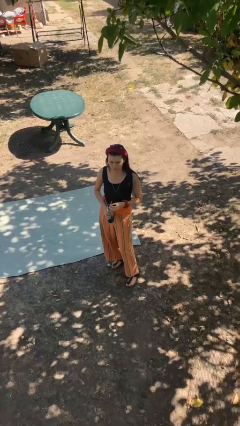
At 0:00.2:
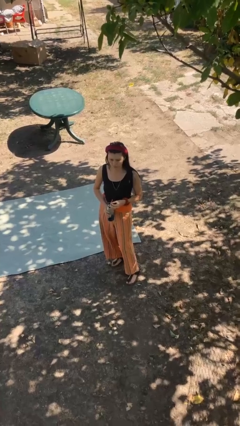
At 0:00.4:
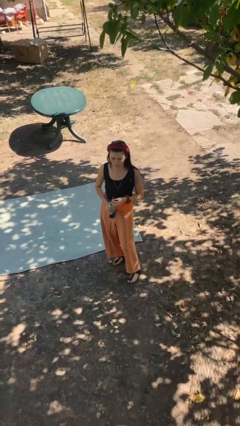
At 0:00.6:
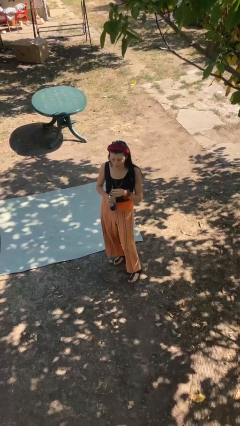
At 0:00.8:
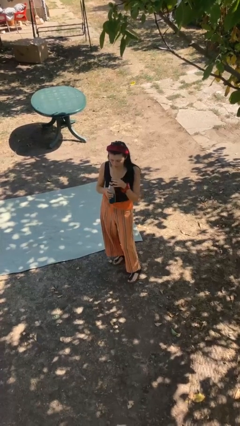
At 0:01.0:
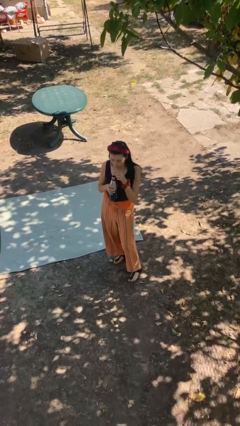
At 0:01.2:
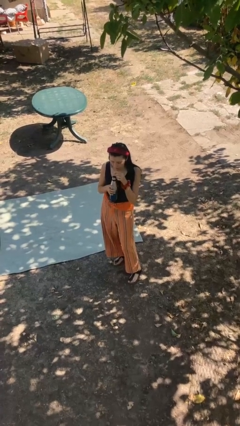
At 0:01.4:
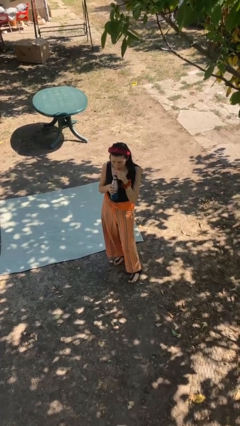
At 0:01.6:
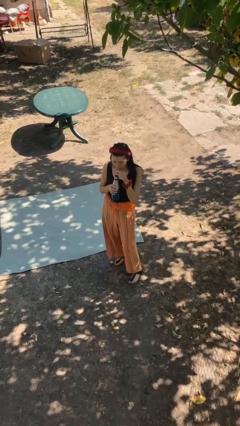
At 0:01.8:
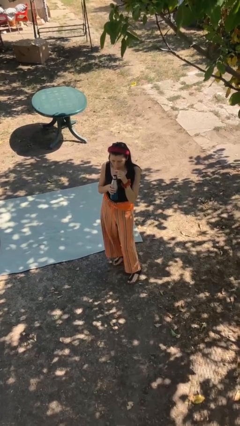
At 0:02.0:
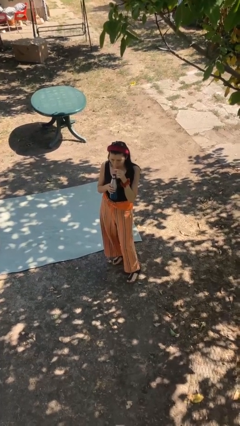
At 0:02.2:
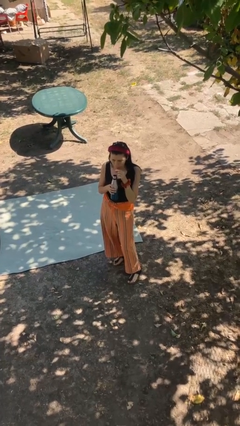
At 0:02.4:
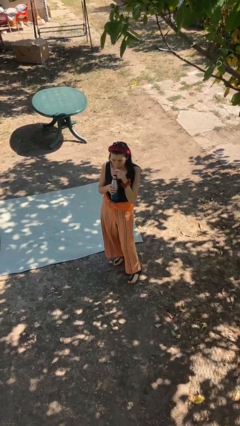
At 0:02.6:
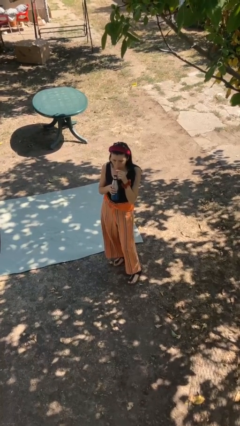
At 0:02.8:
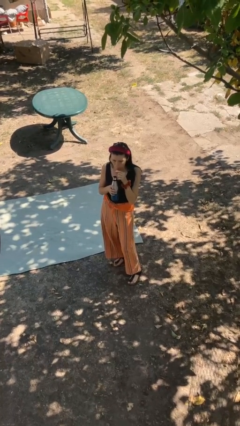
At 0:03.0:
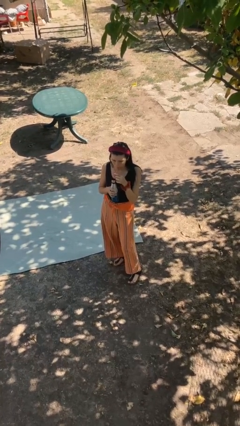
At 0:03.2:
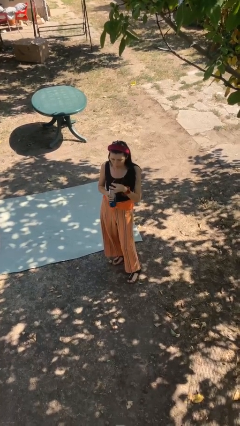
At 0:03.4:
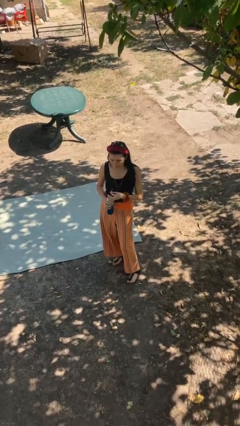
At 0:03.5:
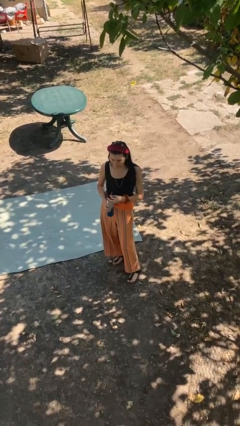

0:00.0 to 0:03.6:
person drinks from bottle

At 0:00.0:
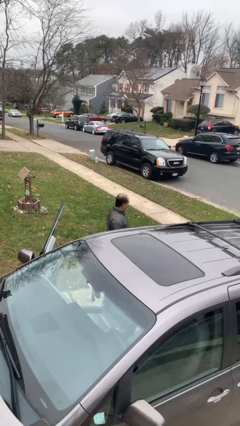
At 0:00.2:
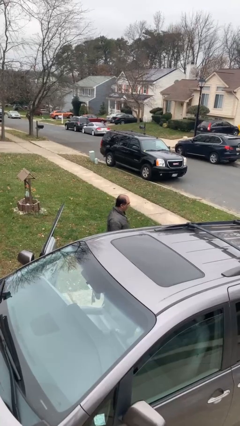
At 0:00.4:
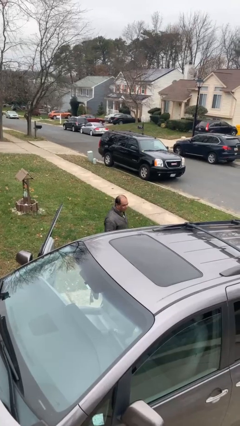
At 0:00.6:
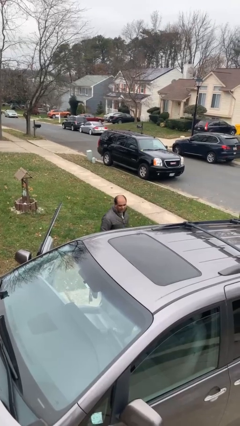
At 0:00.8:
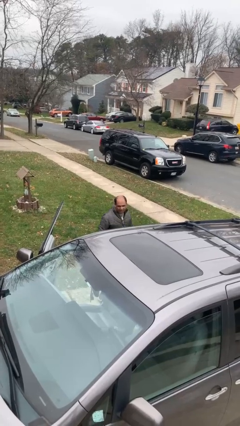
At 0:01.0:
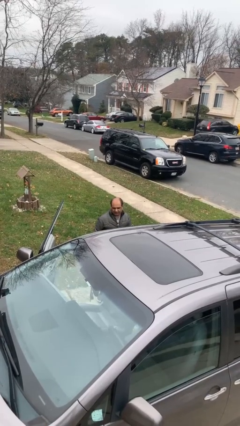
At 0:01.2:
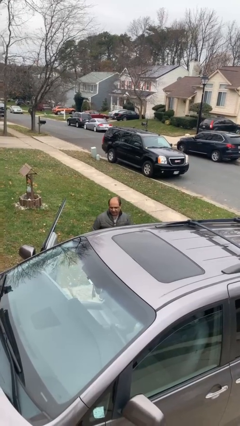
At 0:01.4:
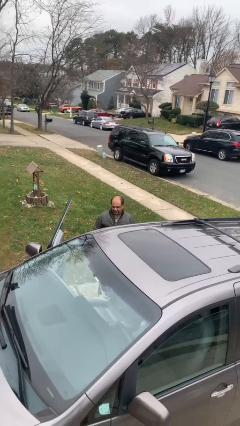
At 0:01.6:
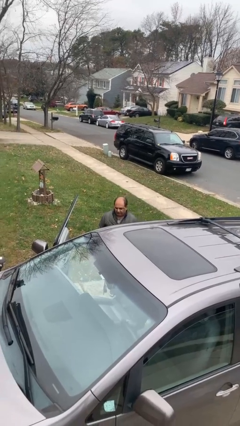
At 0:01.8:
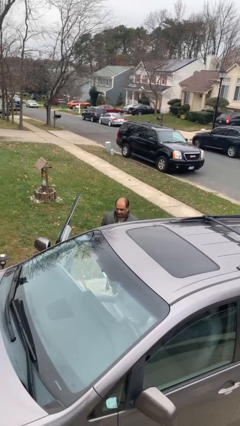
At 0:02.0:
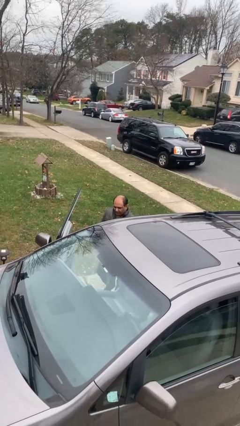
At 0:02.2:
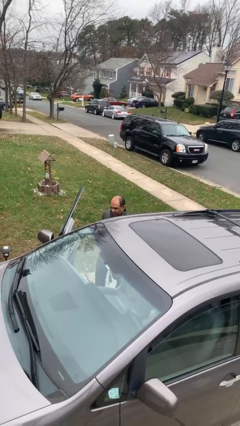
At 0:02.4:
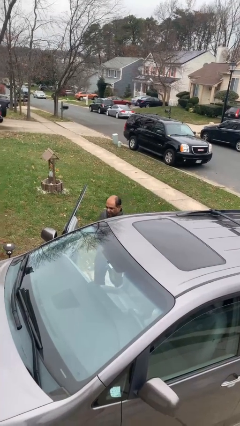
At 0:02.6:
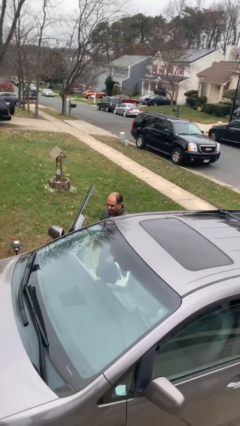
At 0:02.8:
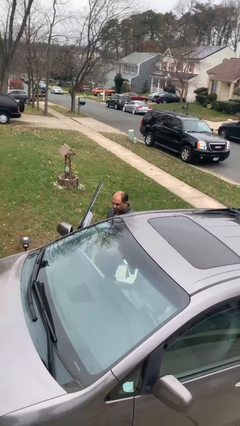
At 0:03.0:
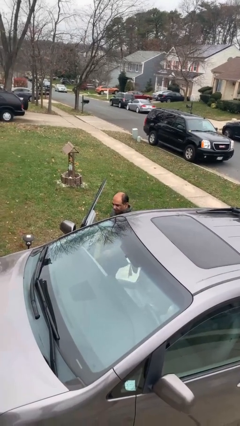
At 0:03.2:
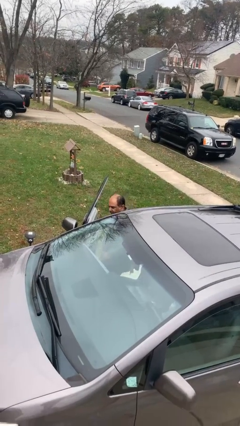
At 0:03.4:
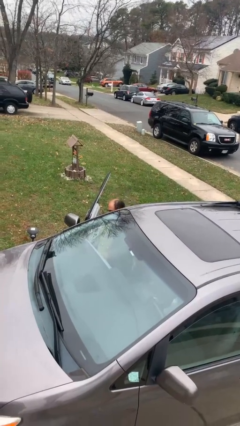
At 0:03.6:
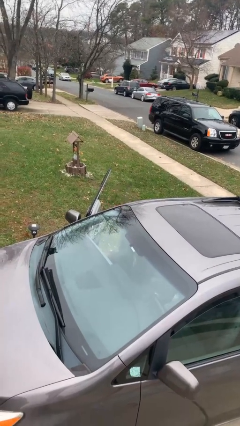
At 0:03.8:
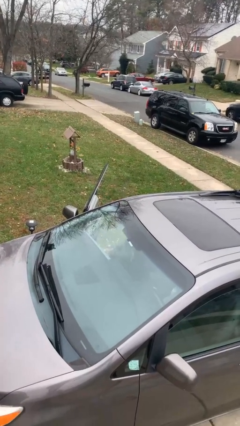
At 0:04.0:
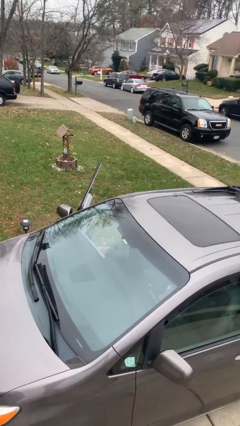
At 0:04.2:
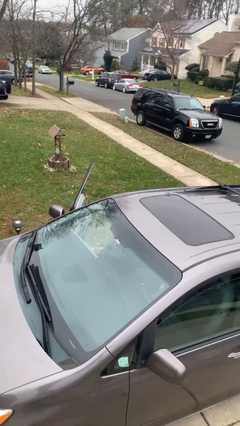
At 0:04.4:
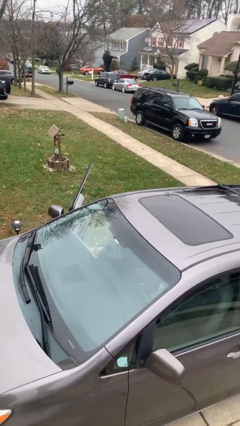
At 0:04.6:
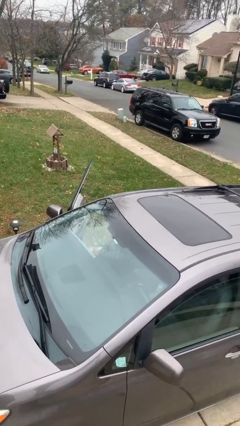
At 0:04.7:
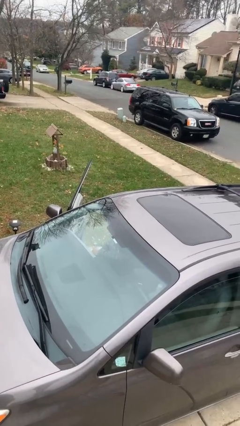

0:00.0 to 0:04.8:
person enters car

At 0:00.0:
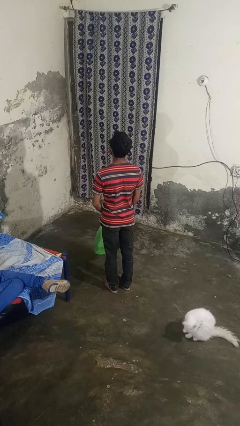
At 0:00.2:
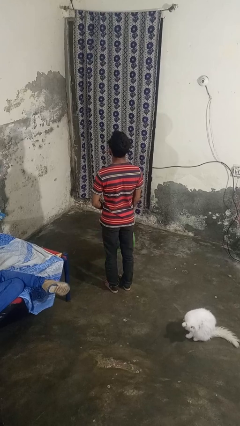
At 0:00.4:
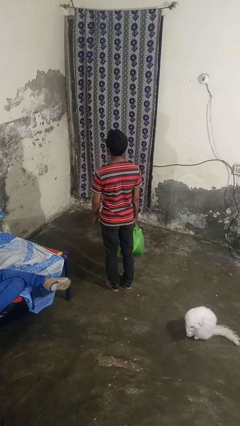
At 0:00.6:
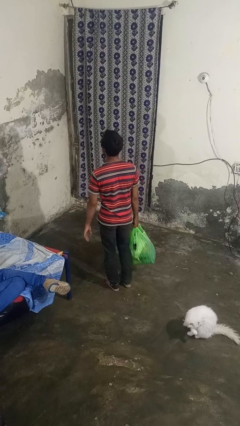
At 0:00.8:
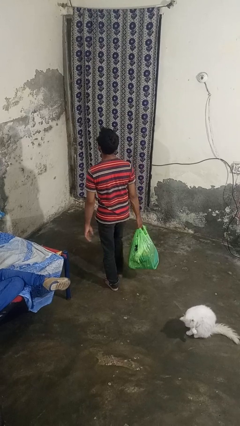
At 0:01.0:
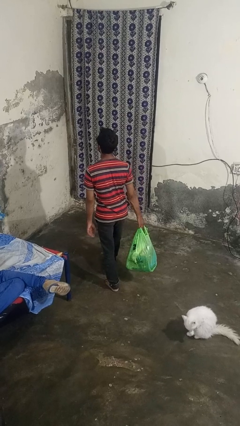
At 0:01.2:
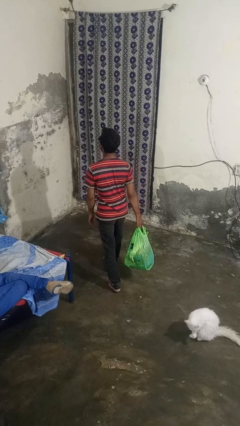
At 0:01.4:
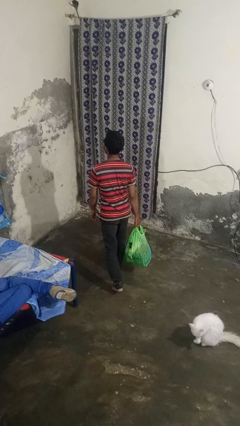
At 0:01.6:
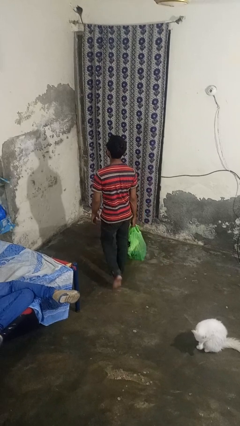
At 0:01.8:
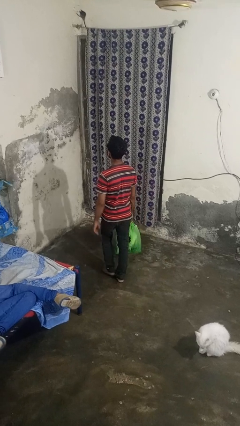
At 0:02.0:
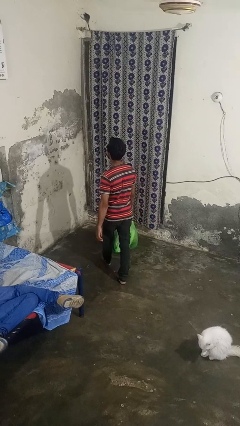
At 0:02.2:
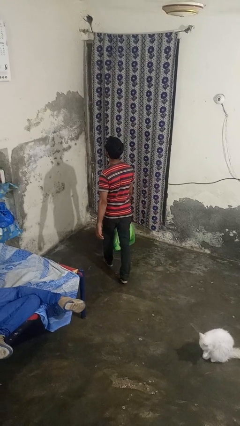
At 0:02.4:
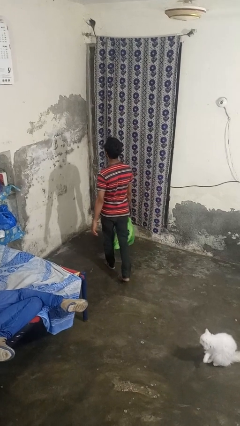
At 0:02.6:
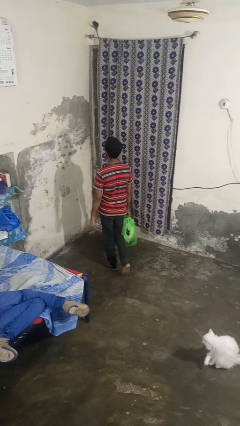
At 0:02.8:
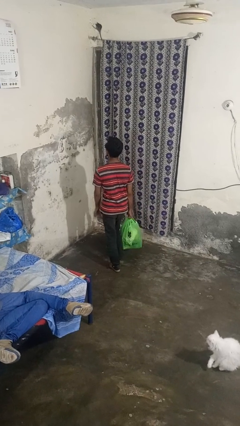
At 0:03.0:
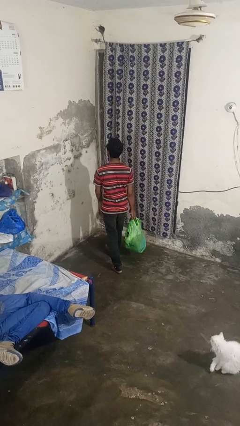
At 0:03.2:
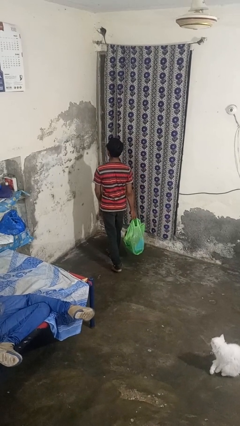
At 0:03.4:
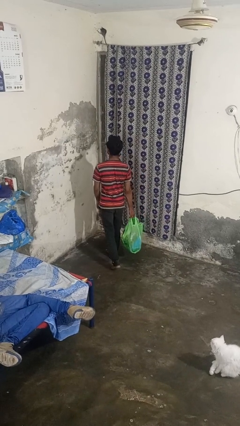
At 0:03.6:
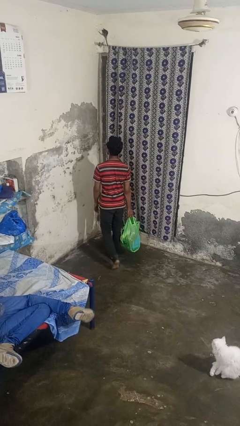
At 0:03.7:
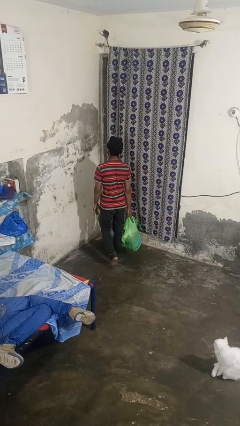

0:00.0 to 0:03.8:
person carries groceries

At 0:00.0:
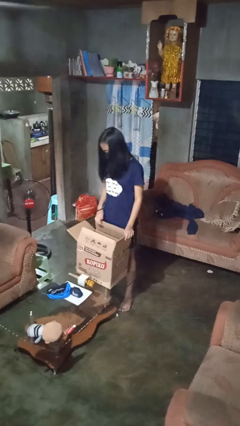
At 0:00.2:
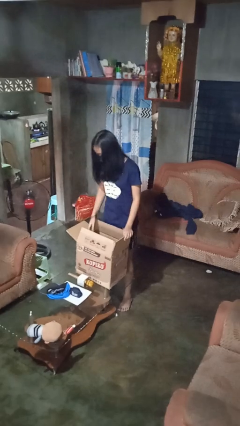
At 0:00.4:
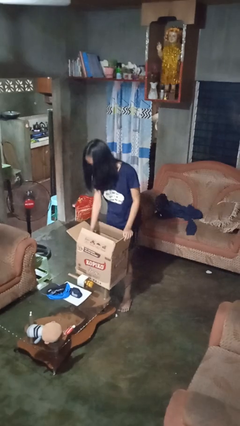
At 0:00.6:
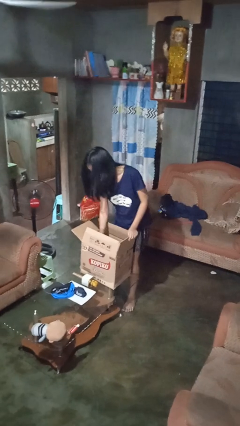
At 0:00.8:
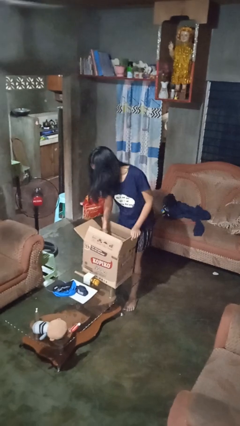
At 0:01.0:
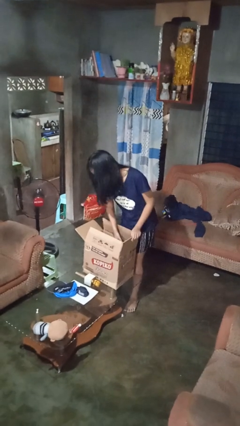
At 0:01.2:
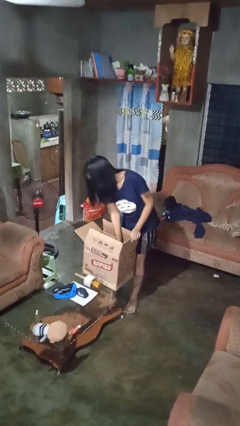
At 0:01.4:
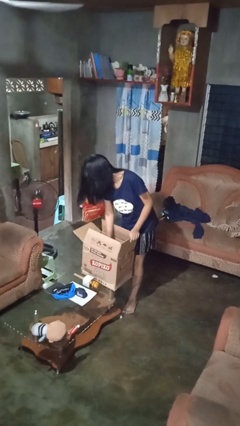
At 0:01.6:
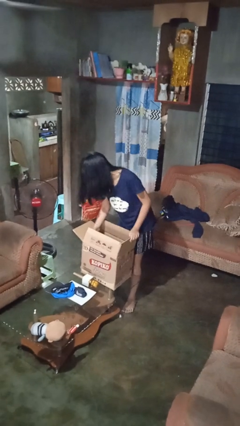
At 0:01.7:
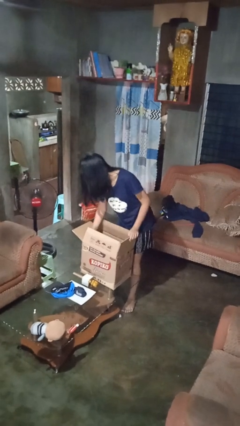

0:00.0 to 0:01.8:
person searches in box

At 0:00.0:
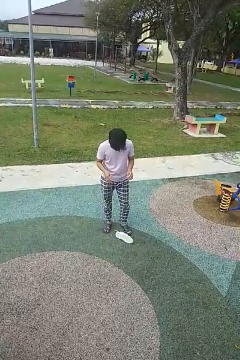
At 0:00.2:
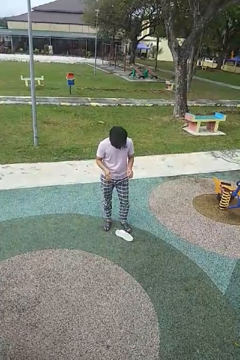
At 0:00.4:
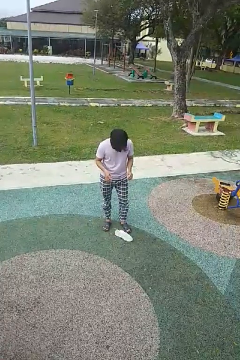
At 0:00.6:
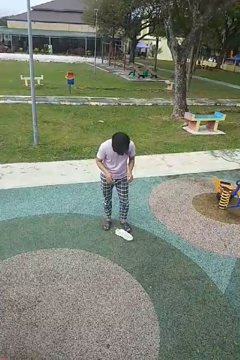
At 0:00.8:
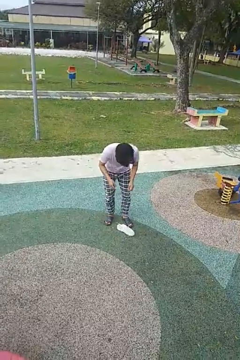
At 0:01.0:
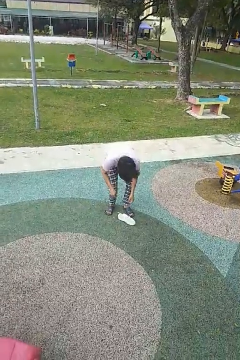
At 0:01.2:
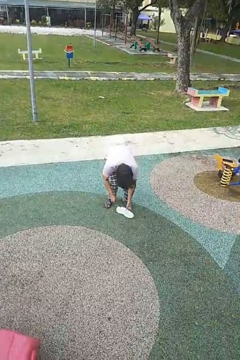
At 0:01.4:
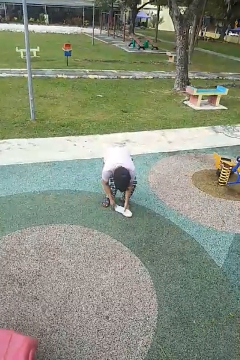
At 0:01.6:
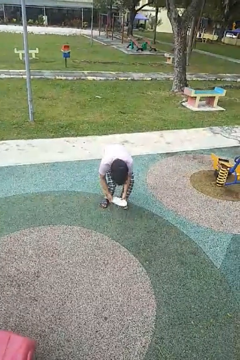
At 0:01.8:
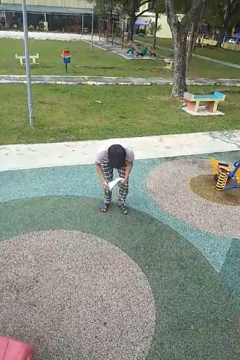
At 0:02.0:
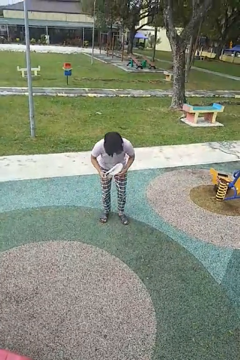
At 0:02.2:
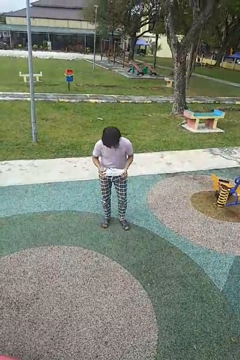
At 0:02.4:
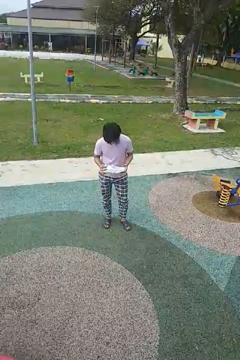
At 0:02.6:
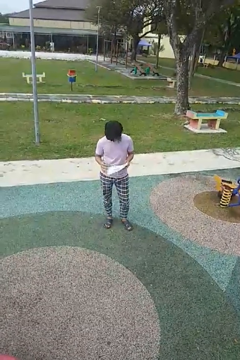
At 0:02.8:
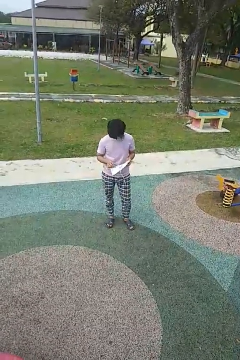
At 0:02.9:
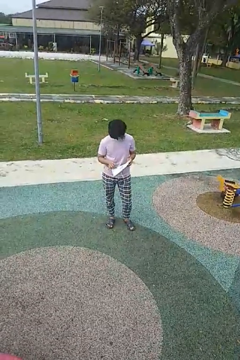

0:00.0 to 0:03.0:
person picks up object from floor

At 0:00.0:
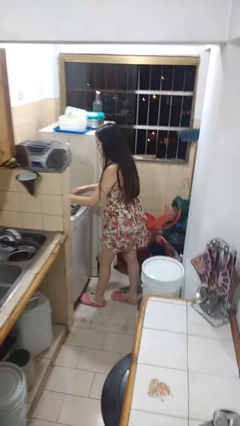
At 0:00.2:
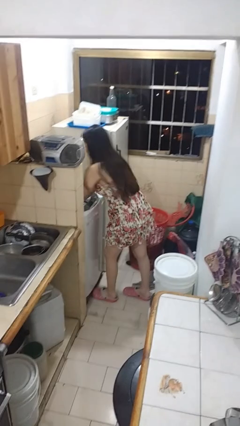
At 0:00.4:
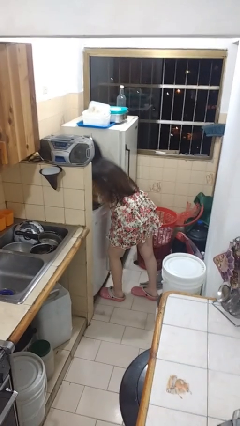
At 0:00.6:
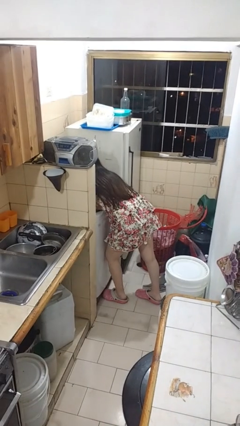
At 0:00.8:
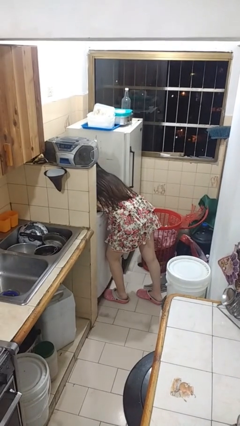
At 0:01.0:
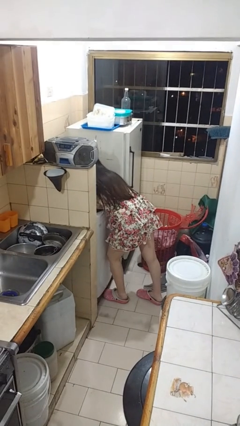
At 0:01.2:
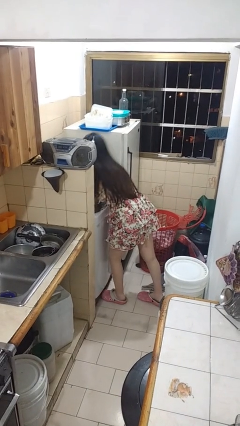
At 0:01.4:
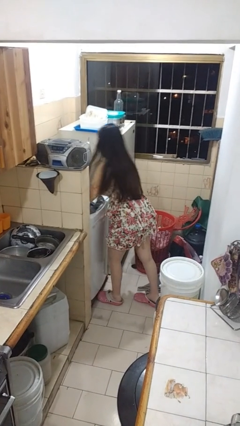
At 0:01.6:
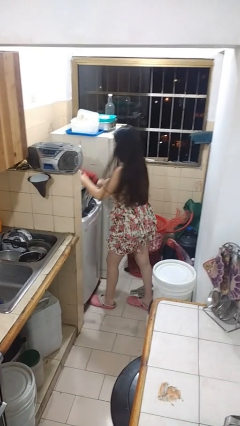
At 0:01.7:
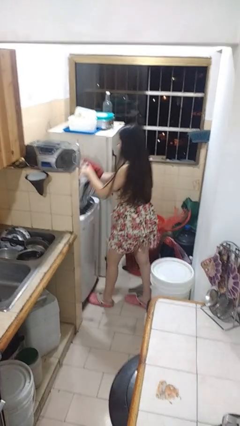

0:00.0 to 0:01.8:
person unloads clotheswasher
